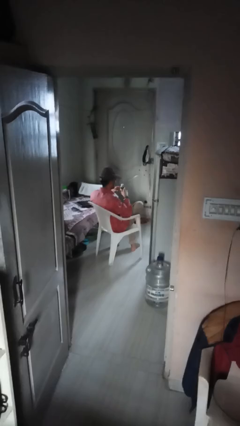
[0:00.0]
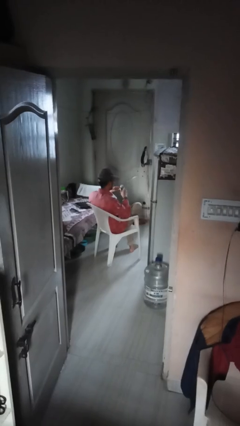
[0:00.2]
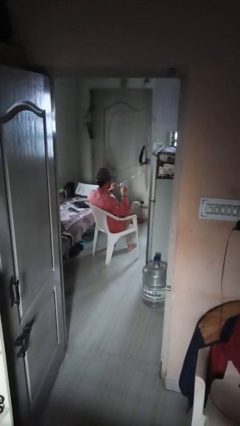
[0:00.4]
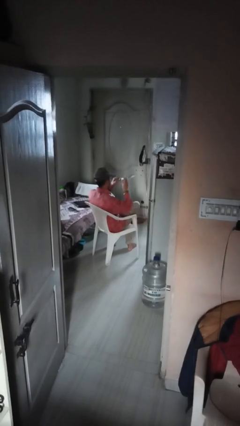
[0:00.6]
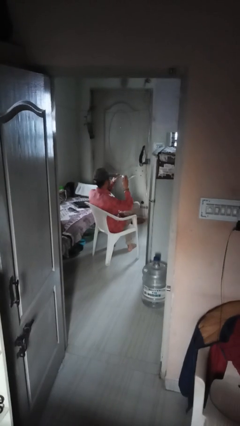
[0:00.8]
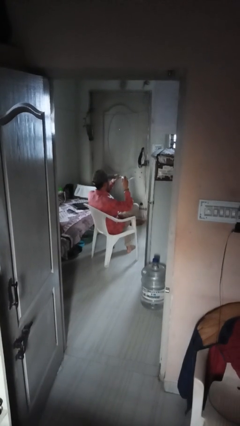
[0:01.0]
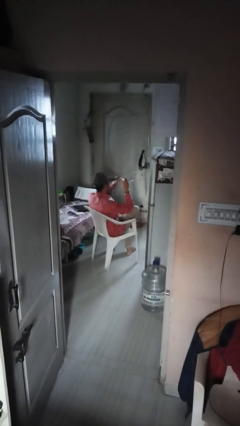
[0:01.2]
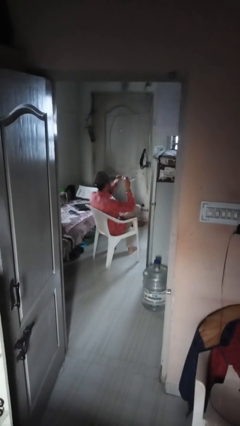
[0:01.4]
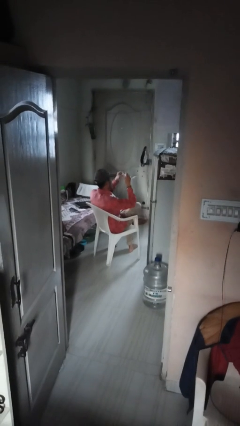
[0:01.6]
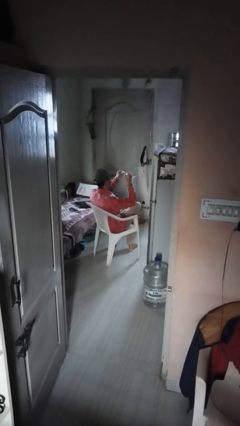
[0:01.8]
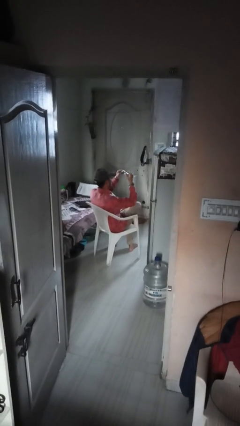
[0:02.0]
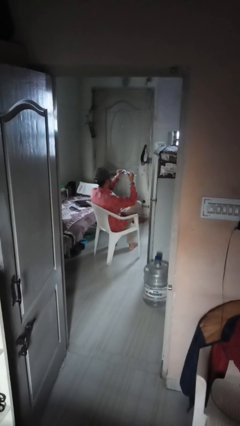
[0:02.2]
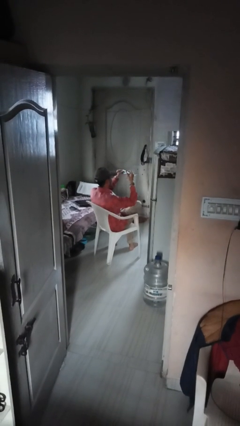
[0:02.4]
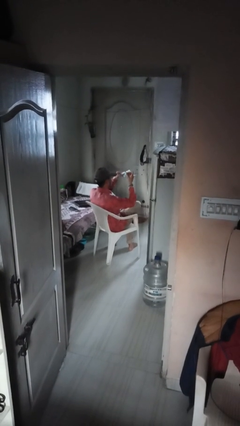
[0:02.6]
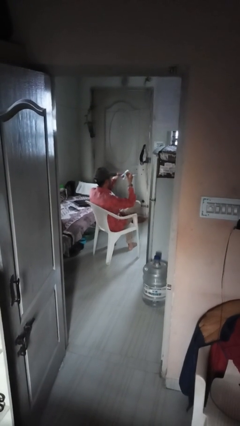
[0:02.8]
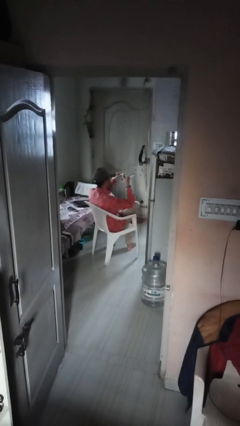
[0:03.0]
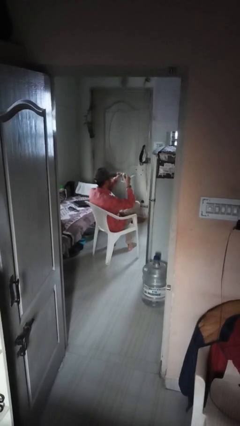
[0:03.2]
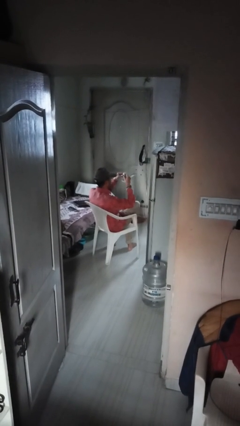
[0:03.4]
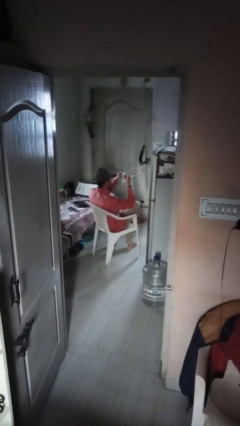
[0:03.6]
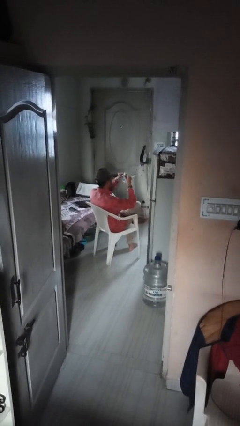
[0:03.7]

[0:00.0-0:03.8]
person squeezes object

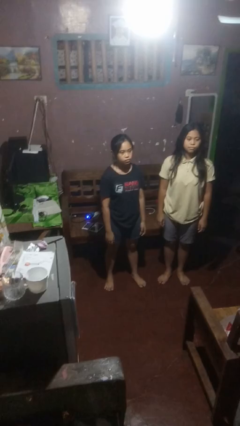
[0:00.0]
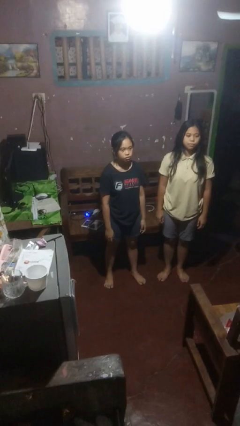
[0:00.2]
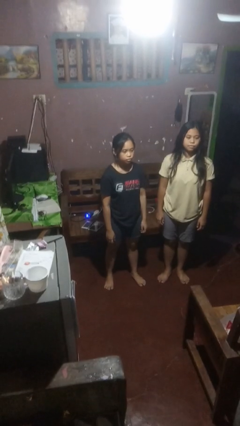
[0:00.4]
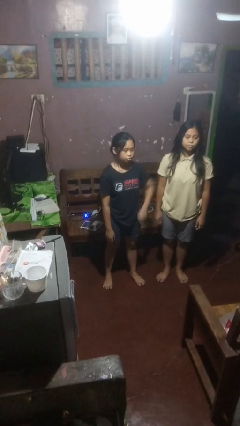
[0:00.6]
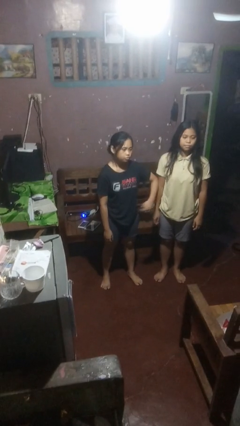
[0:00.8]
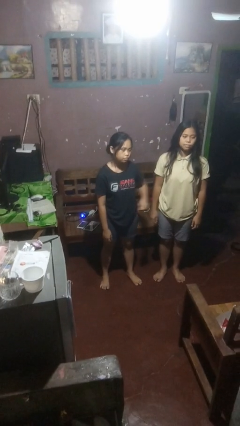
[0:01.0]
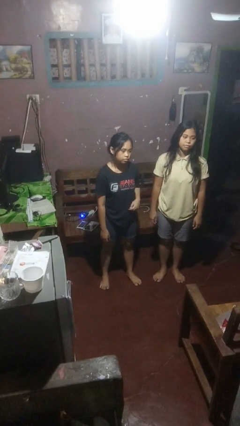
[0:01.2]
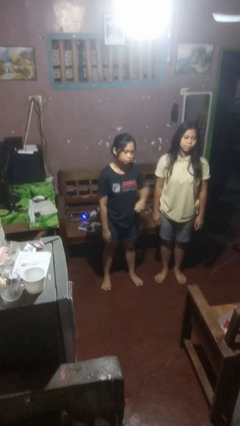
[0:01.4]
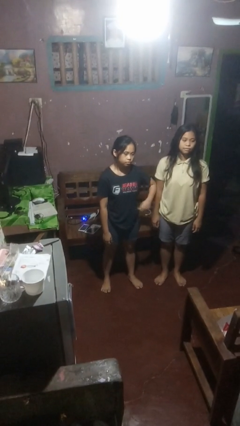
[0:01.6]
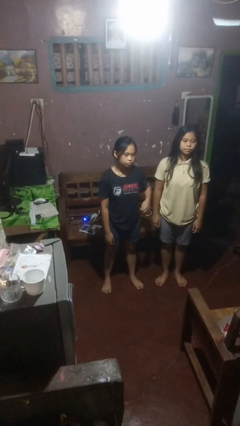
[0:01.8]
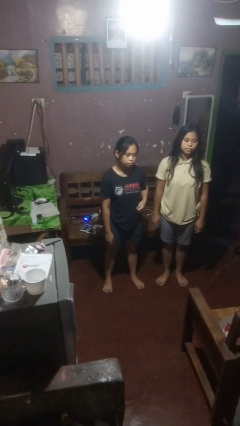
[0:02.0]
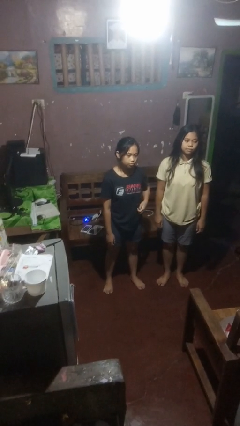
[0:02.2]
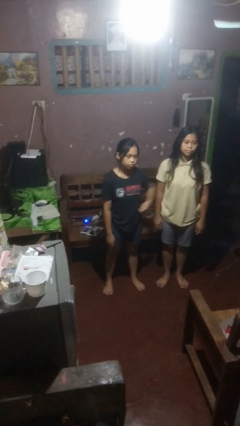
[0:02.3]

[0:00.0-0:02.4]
person nudges person with elbow

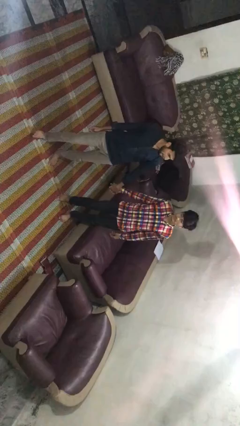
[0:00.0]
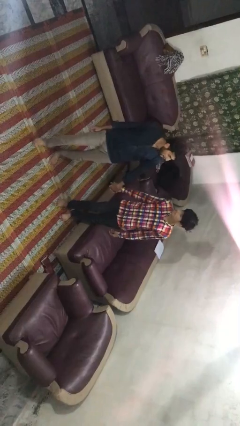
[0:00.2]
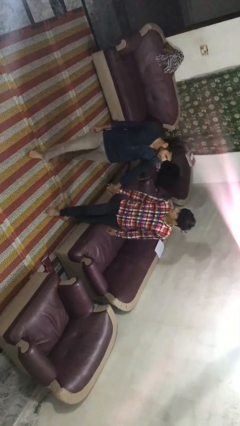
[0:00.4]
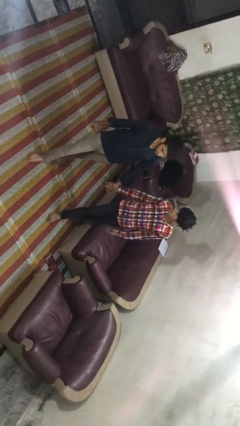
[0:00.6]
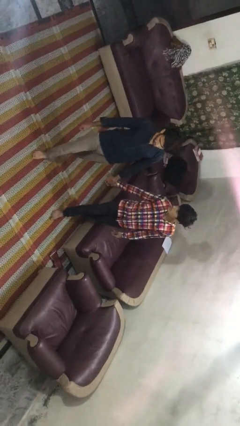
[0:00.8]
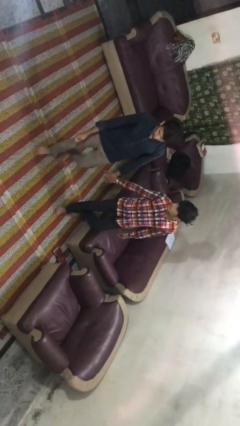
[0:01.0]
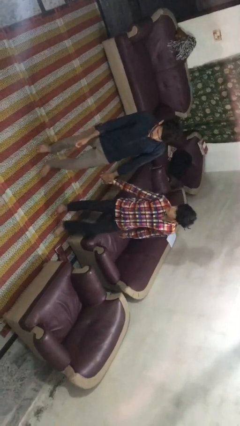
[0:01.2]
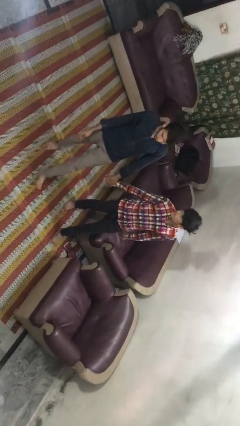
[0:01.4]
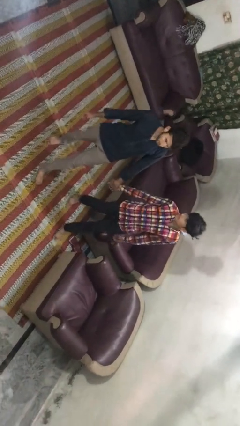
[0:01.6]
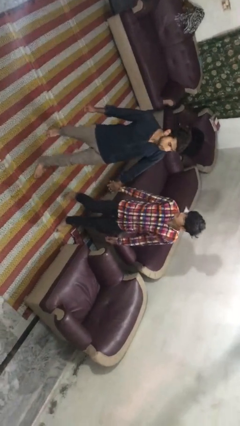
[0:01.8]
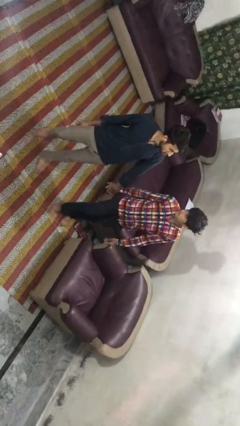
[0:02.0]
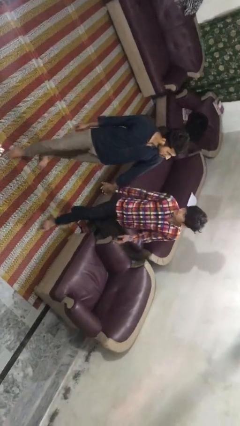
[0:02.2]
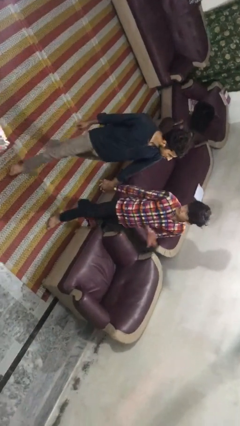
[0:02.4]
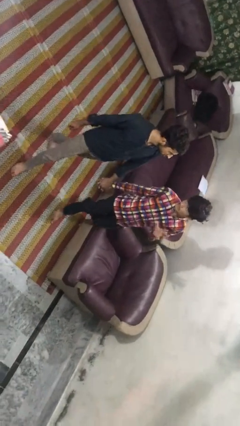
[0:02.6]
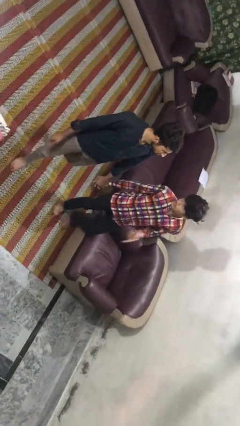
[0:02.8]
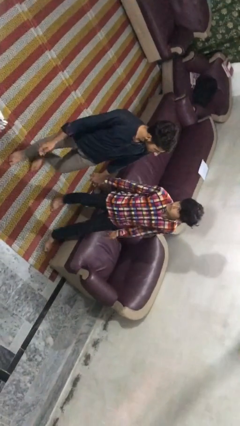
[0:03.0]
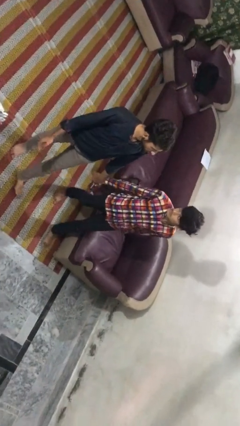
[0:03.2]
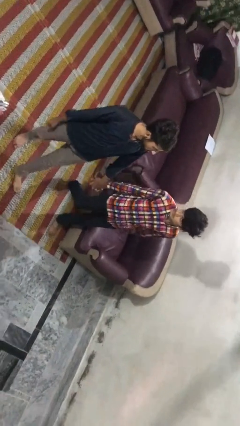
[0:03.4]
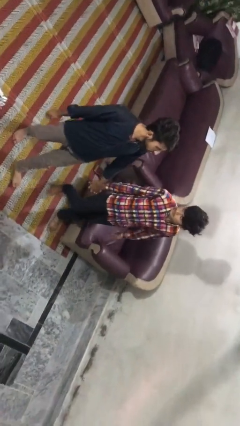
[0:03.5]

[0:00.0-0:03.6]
person holds hand

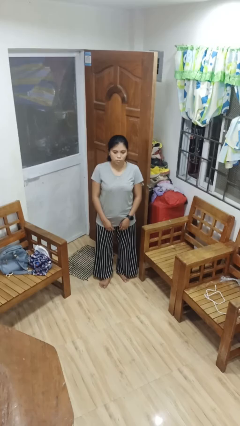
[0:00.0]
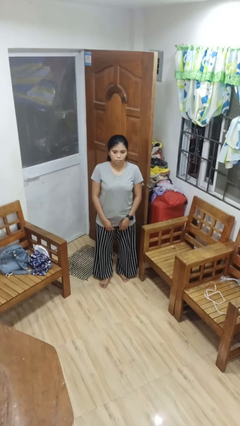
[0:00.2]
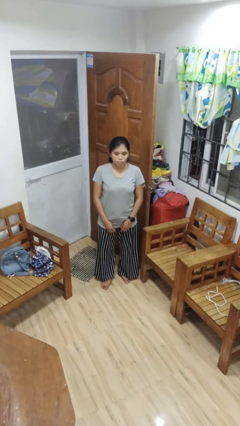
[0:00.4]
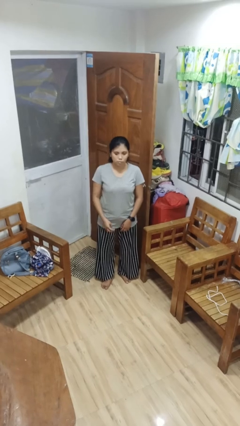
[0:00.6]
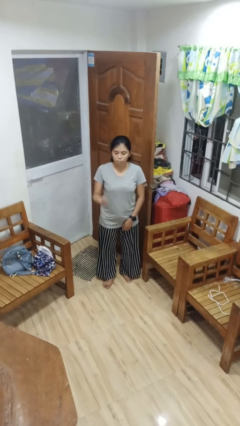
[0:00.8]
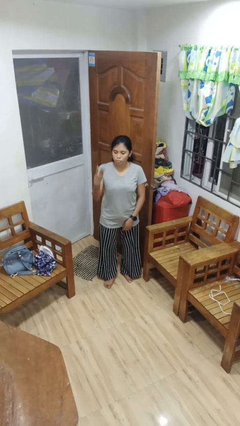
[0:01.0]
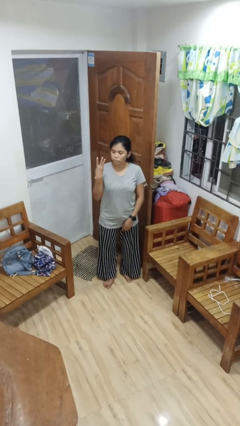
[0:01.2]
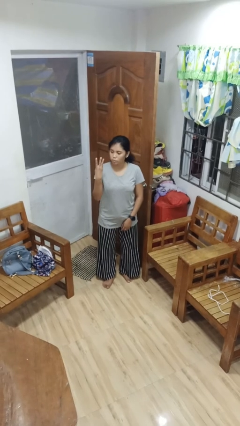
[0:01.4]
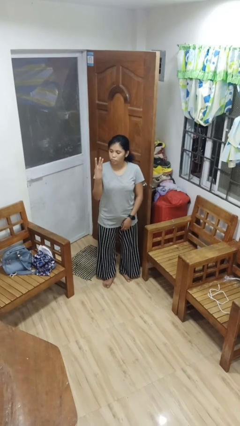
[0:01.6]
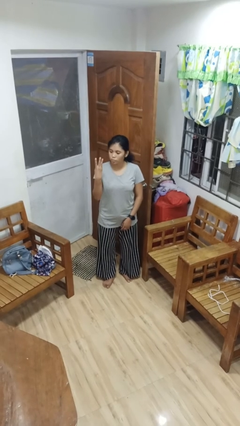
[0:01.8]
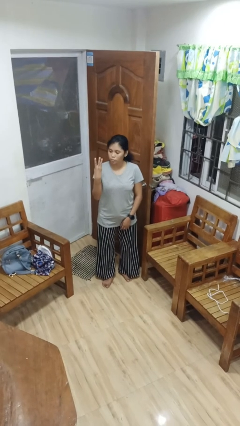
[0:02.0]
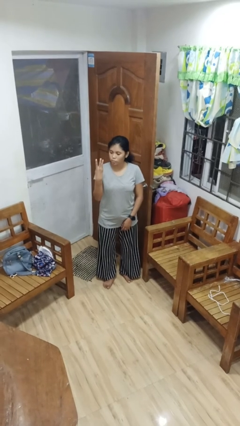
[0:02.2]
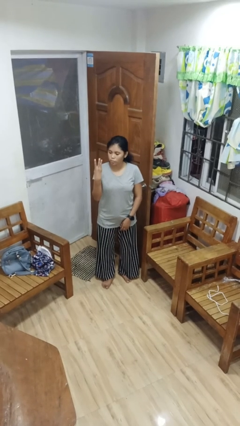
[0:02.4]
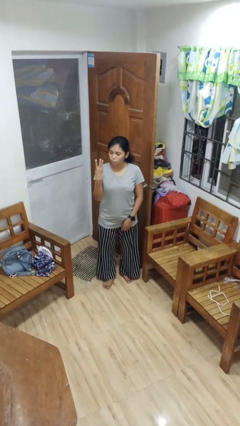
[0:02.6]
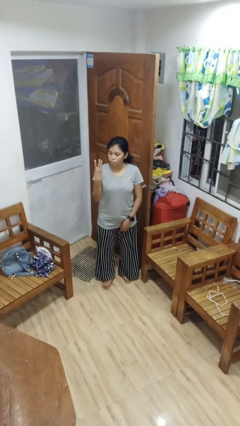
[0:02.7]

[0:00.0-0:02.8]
person gestures number three

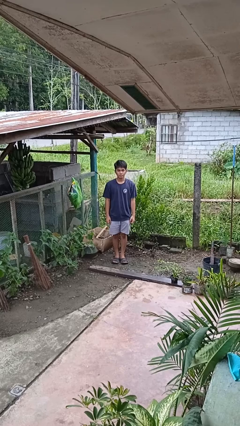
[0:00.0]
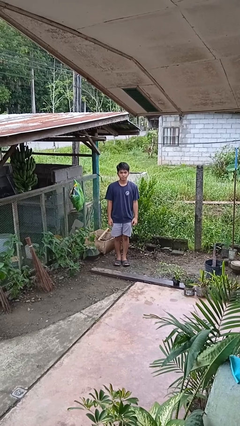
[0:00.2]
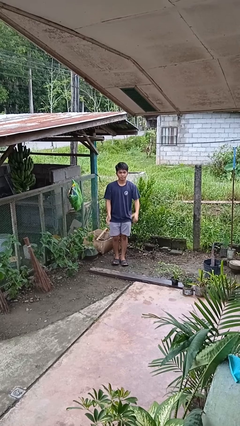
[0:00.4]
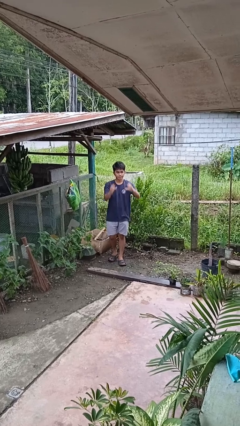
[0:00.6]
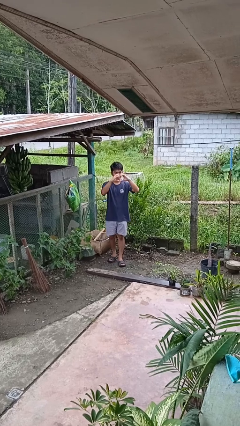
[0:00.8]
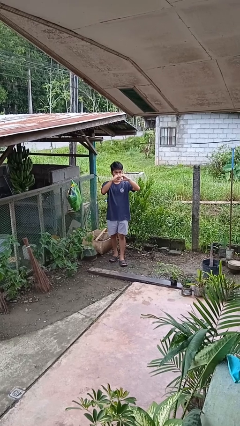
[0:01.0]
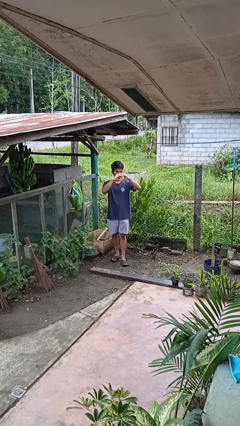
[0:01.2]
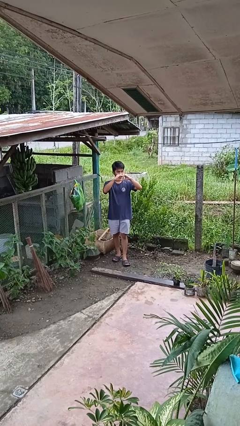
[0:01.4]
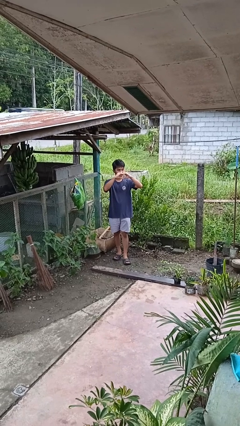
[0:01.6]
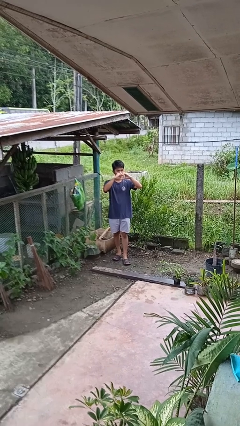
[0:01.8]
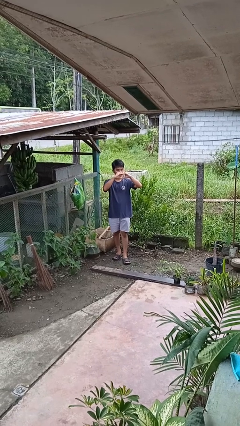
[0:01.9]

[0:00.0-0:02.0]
person gestures heart

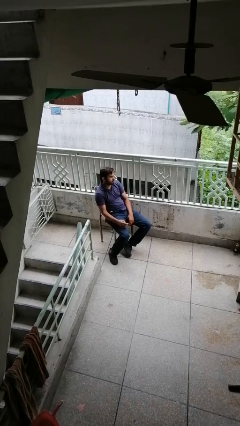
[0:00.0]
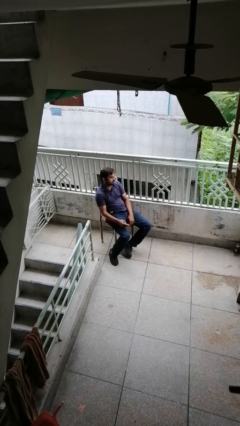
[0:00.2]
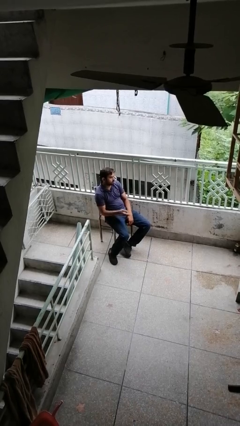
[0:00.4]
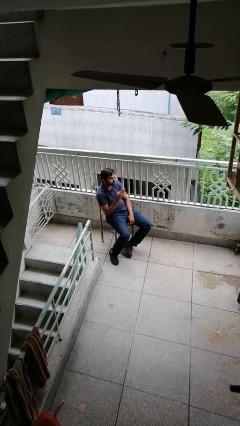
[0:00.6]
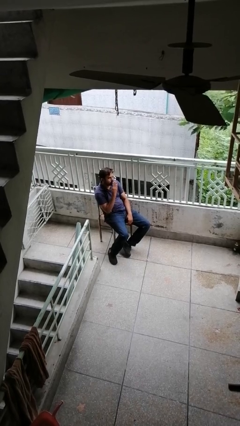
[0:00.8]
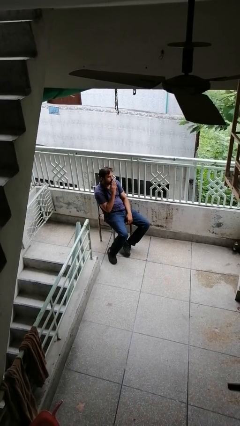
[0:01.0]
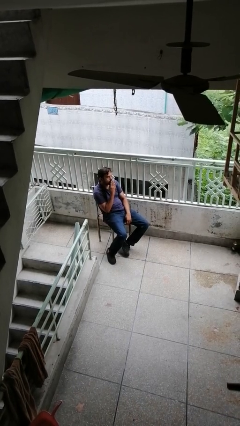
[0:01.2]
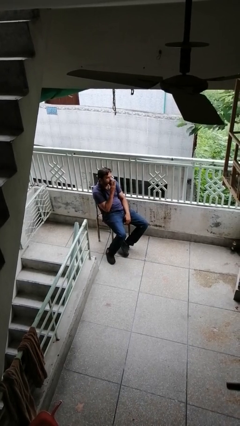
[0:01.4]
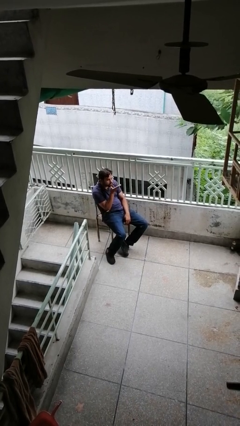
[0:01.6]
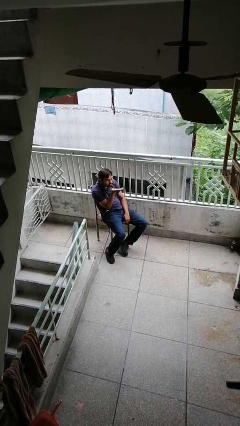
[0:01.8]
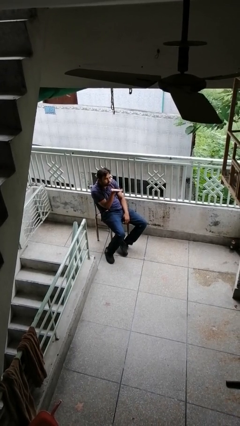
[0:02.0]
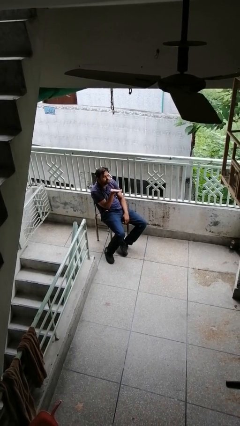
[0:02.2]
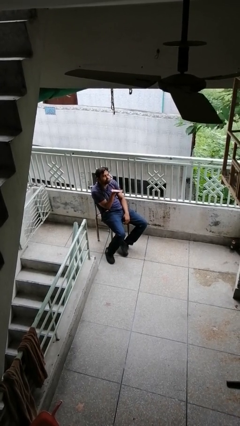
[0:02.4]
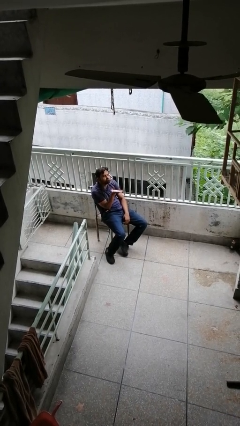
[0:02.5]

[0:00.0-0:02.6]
person gestures blow kiss
